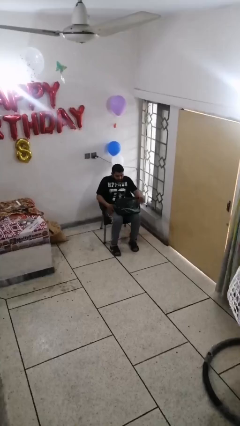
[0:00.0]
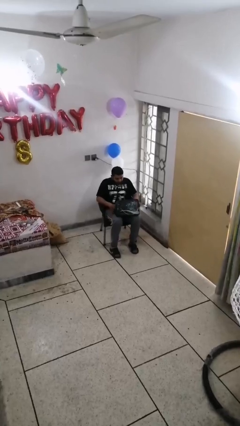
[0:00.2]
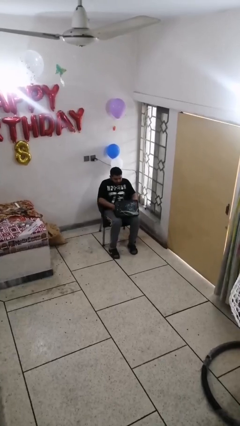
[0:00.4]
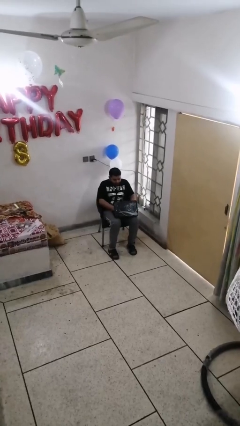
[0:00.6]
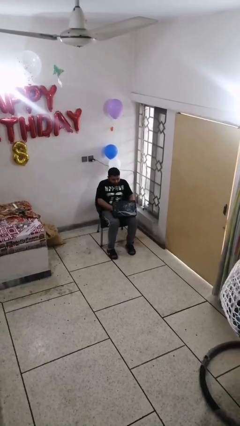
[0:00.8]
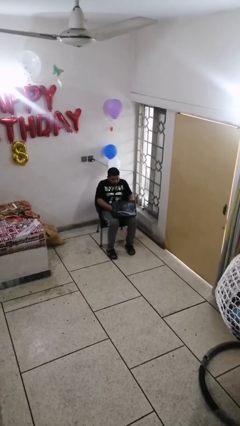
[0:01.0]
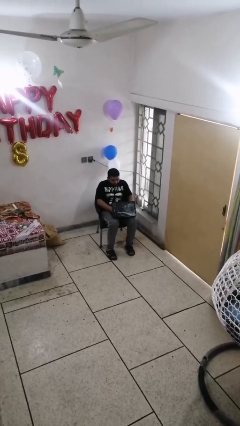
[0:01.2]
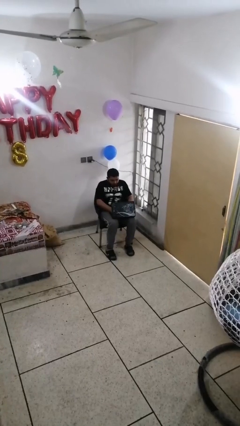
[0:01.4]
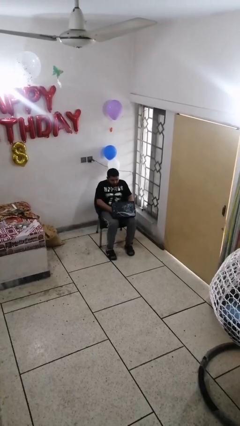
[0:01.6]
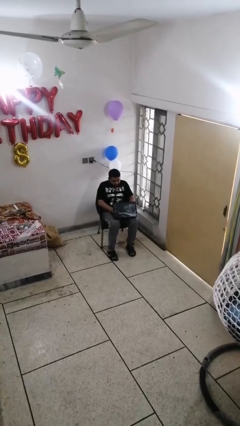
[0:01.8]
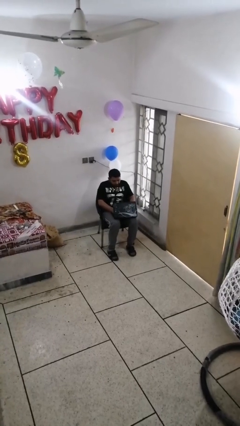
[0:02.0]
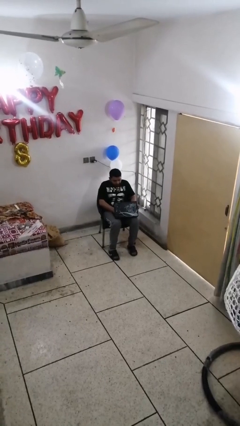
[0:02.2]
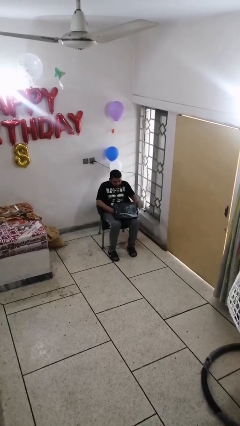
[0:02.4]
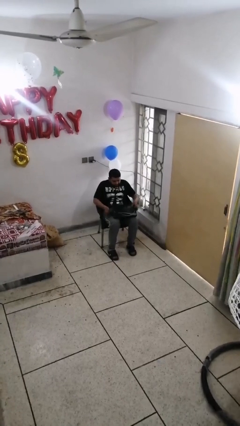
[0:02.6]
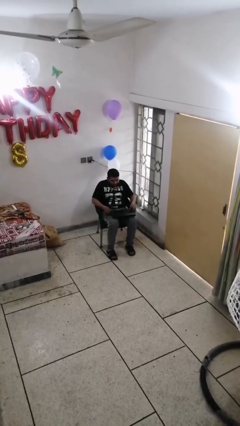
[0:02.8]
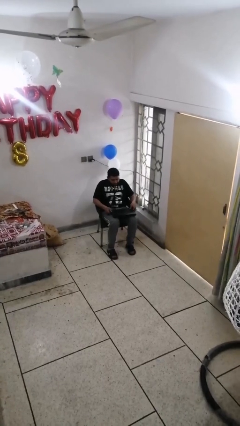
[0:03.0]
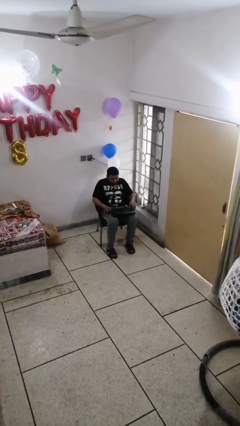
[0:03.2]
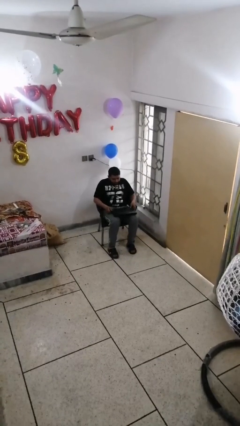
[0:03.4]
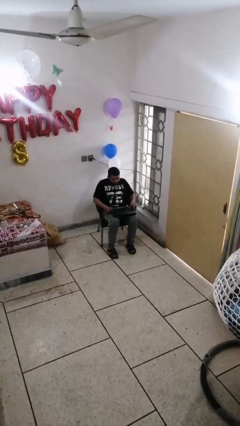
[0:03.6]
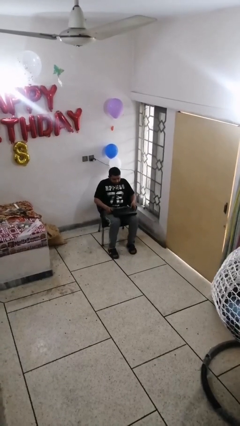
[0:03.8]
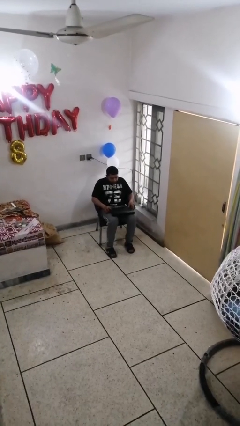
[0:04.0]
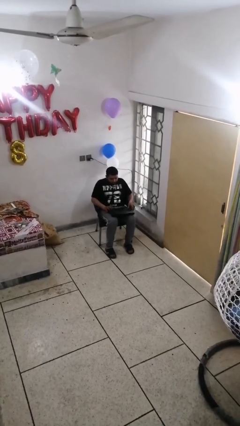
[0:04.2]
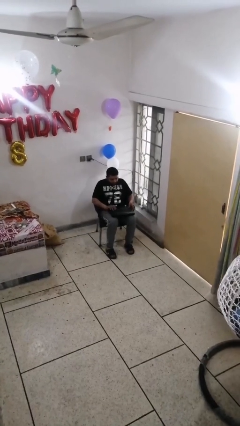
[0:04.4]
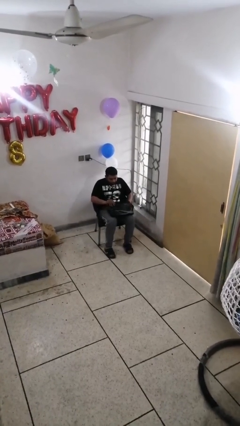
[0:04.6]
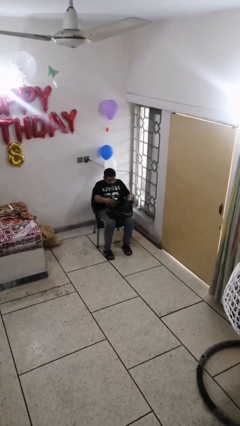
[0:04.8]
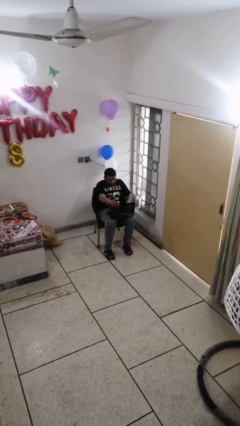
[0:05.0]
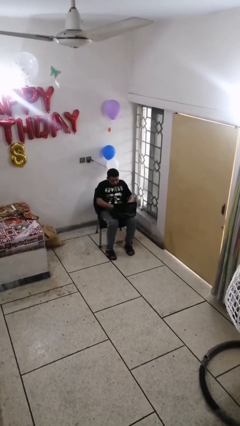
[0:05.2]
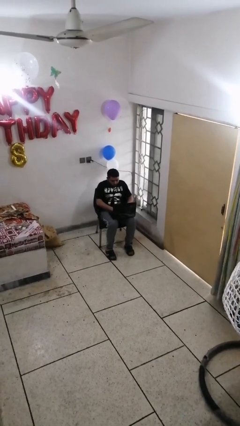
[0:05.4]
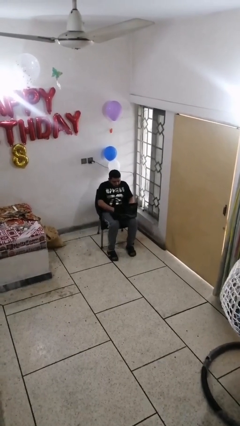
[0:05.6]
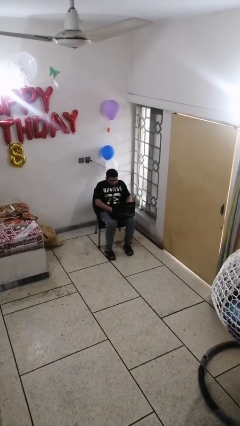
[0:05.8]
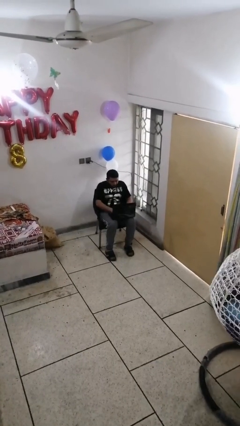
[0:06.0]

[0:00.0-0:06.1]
person interacts with laptop

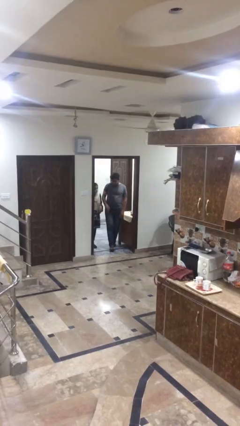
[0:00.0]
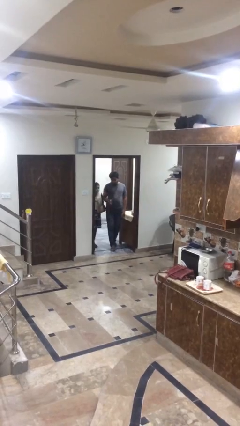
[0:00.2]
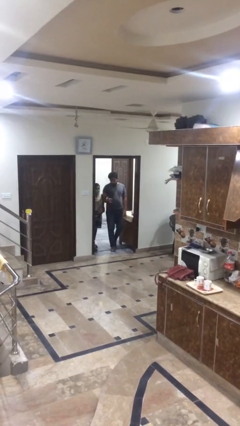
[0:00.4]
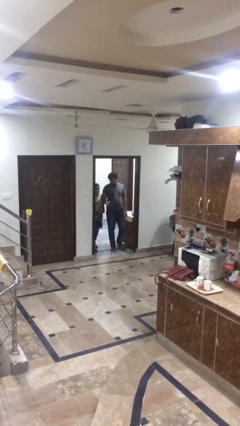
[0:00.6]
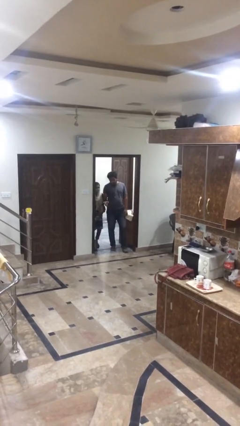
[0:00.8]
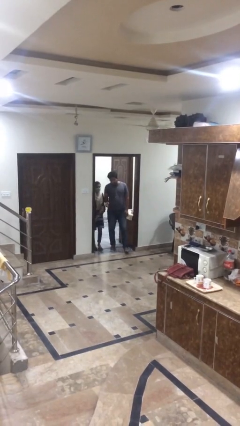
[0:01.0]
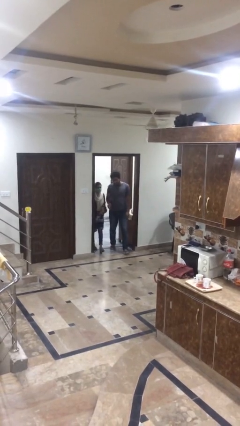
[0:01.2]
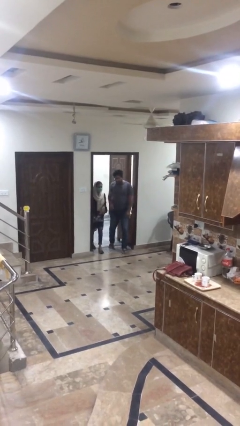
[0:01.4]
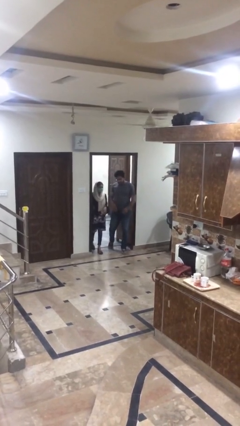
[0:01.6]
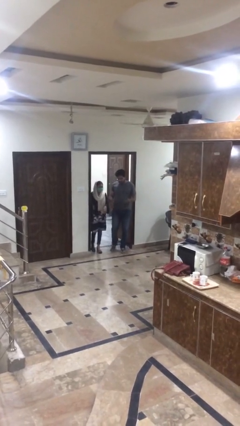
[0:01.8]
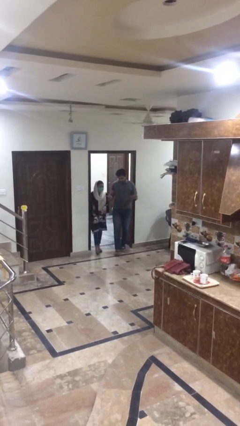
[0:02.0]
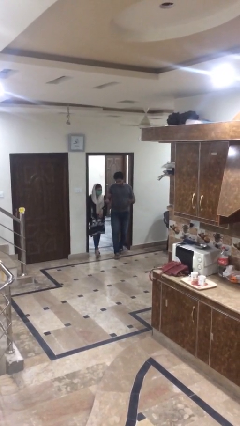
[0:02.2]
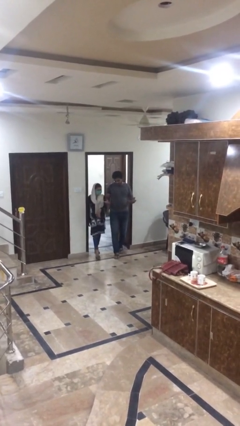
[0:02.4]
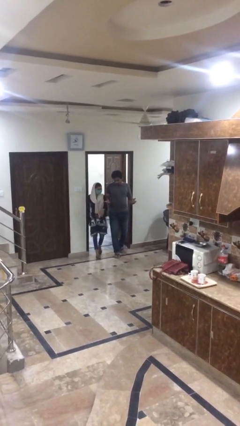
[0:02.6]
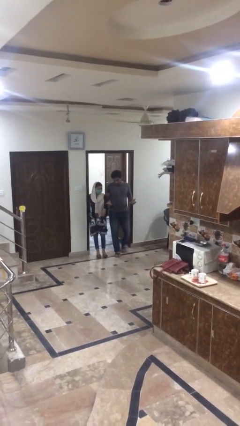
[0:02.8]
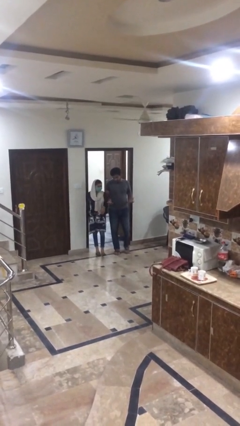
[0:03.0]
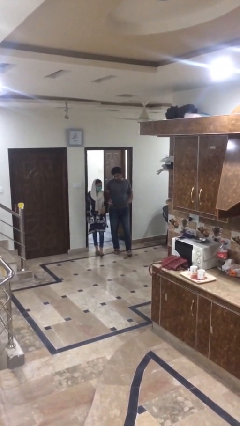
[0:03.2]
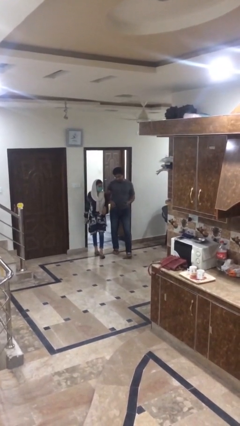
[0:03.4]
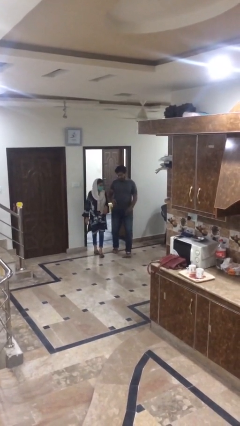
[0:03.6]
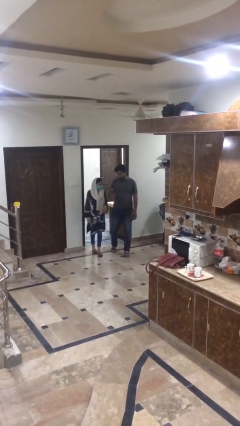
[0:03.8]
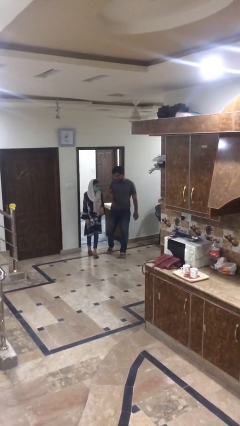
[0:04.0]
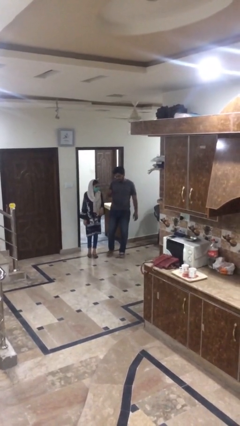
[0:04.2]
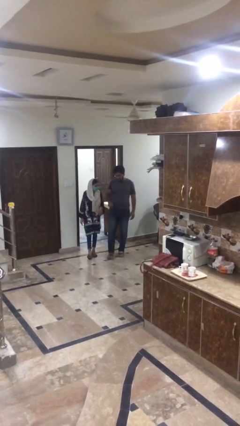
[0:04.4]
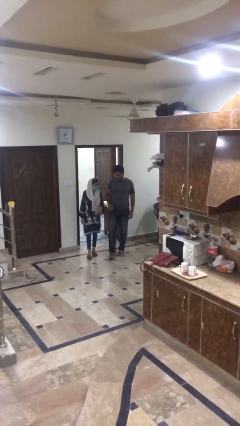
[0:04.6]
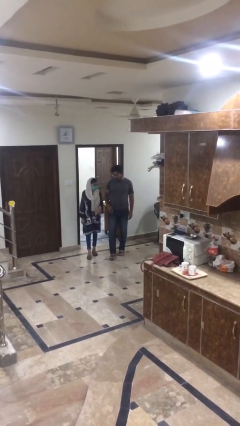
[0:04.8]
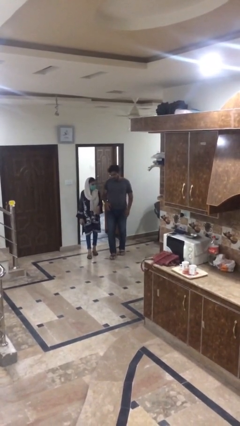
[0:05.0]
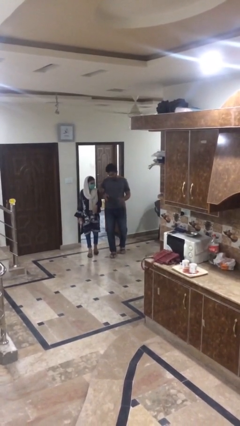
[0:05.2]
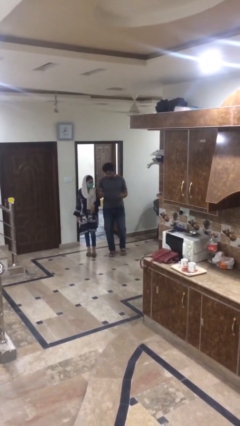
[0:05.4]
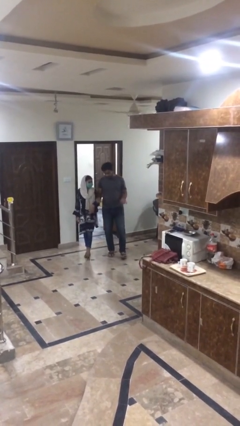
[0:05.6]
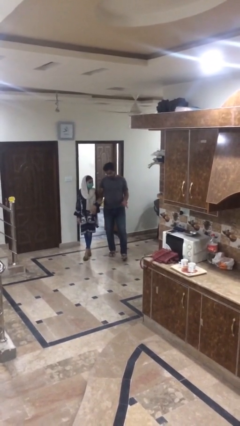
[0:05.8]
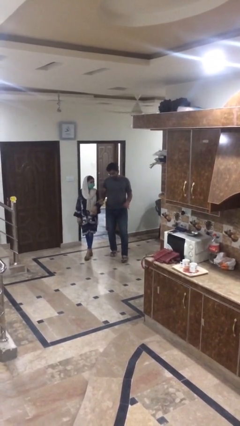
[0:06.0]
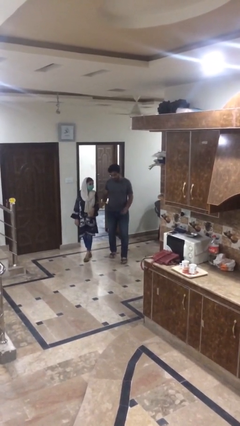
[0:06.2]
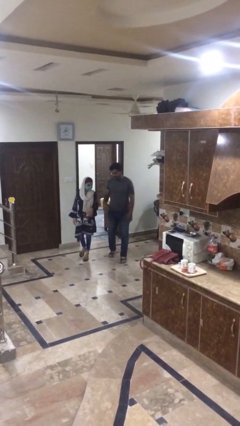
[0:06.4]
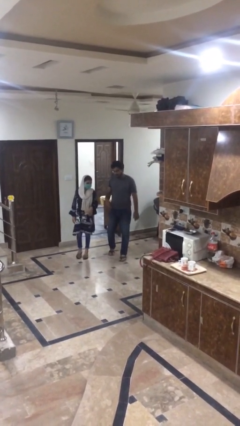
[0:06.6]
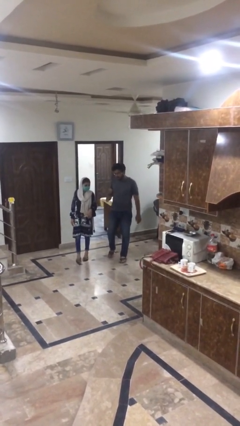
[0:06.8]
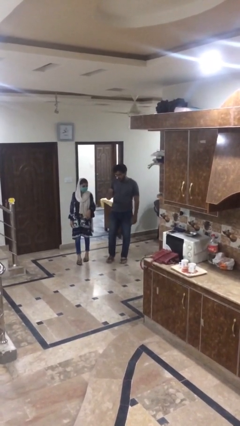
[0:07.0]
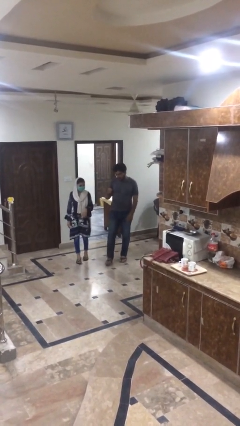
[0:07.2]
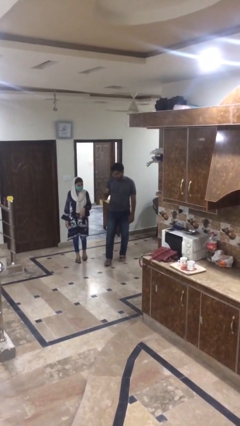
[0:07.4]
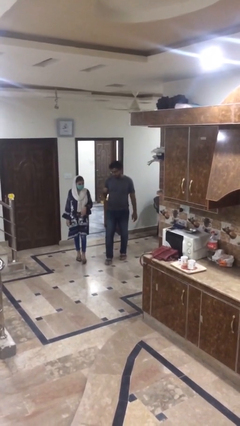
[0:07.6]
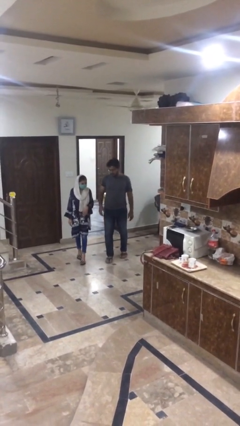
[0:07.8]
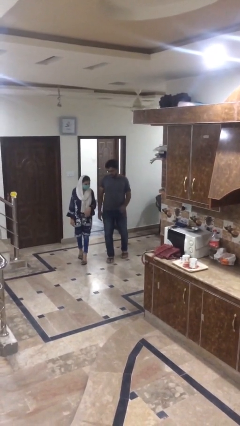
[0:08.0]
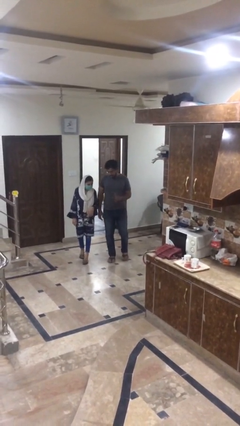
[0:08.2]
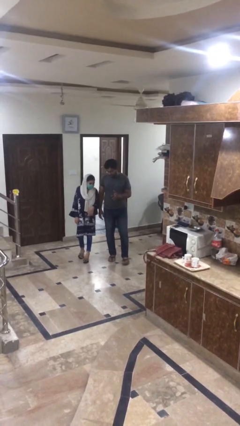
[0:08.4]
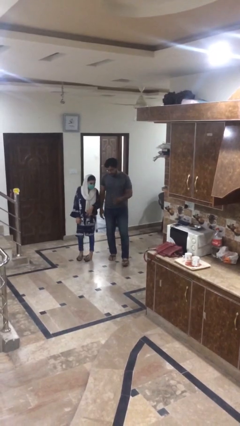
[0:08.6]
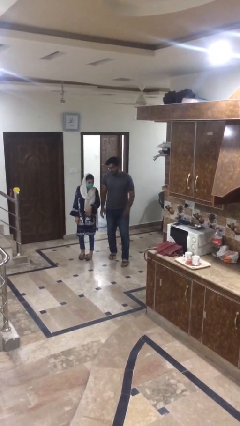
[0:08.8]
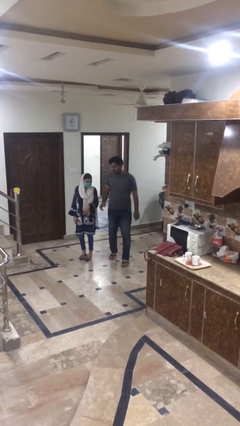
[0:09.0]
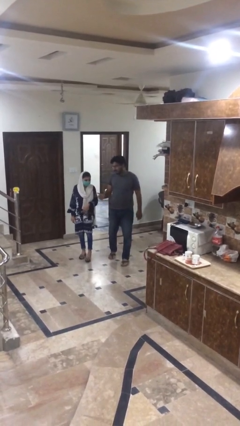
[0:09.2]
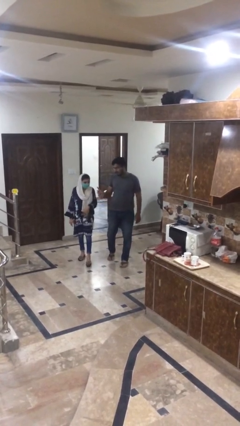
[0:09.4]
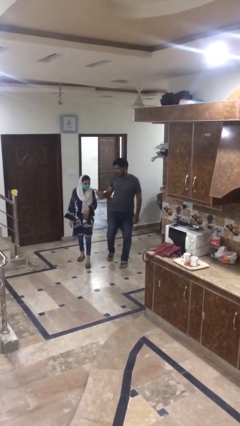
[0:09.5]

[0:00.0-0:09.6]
person talks to person

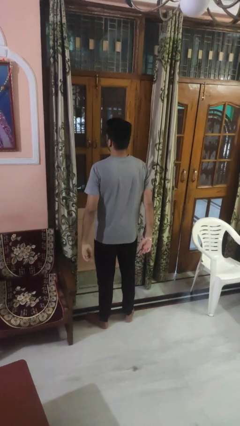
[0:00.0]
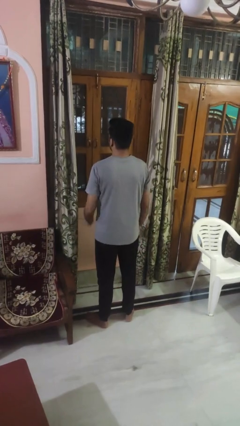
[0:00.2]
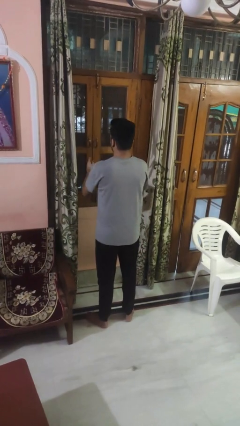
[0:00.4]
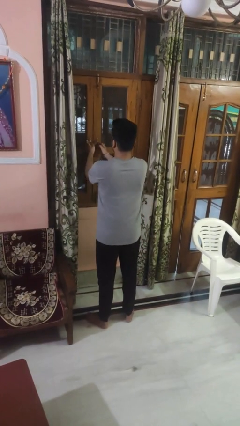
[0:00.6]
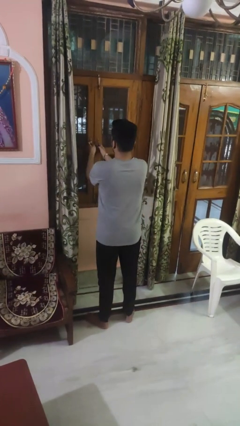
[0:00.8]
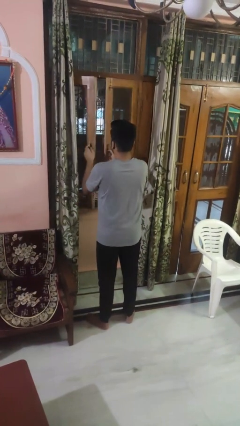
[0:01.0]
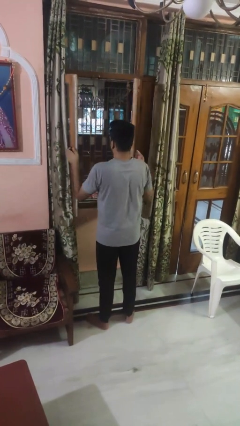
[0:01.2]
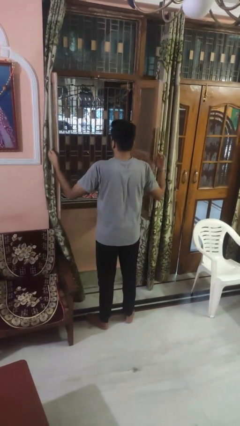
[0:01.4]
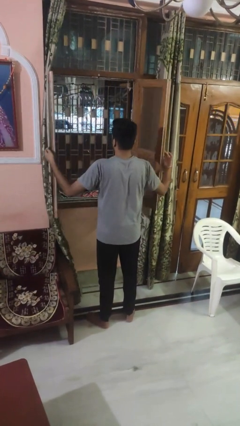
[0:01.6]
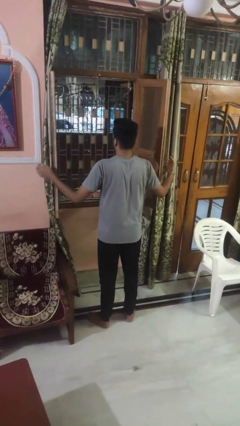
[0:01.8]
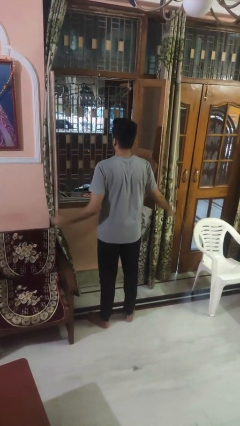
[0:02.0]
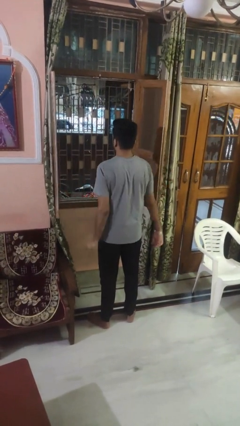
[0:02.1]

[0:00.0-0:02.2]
person opens home window
